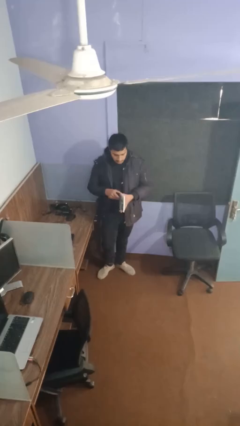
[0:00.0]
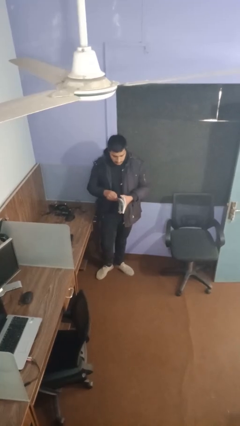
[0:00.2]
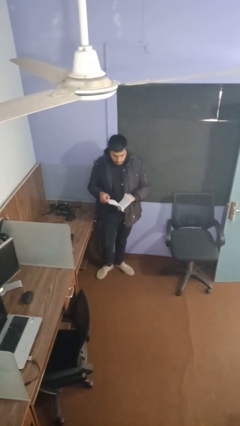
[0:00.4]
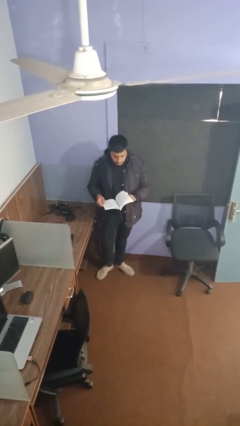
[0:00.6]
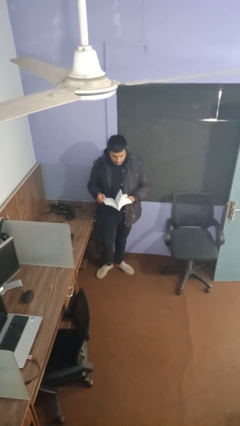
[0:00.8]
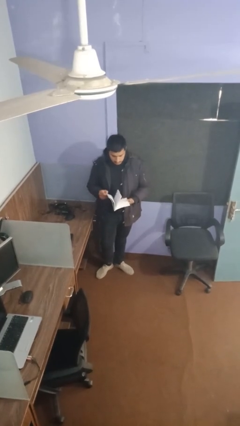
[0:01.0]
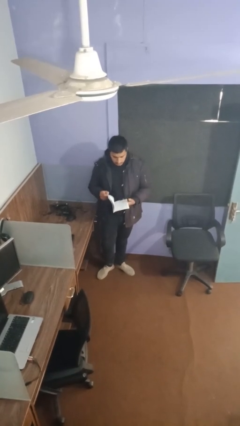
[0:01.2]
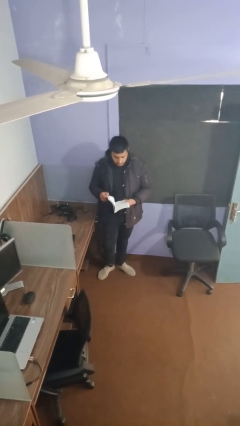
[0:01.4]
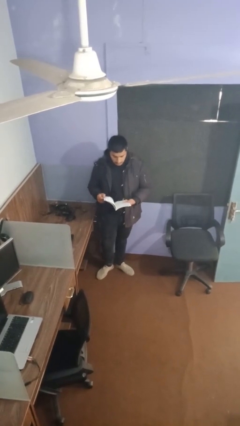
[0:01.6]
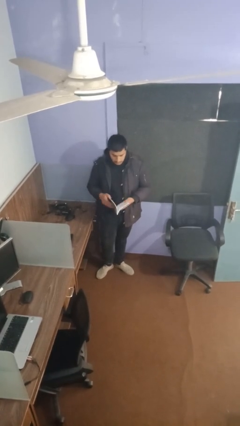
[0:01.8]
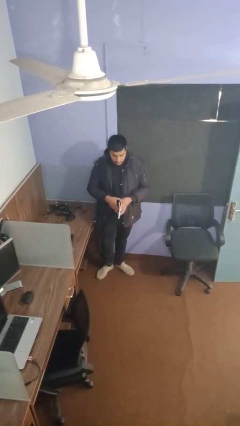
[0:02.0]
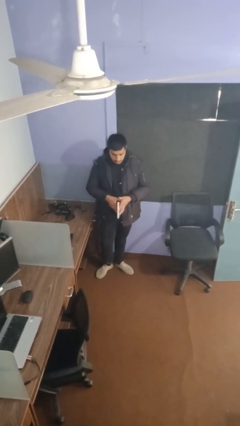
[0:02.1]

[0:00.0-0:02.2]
person reads document

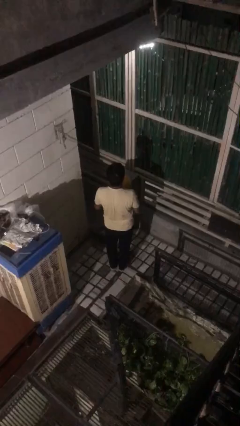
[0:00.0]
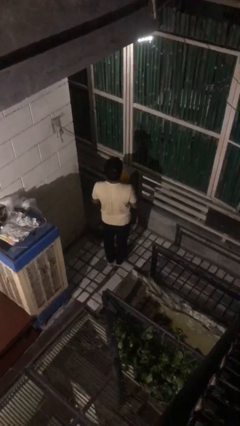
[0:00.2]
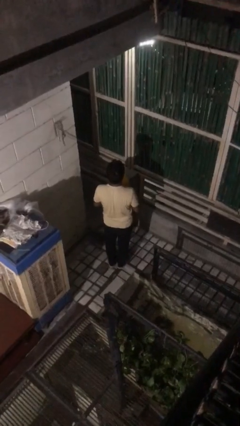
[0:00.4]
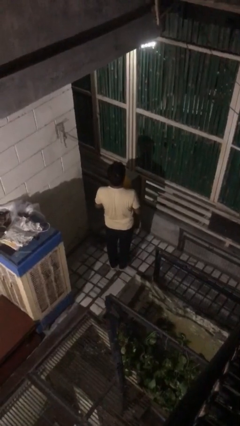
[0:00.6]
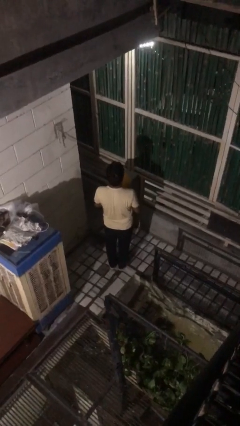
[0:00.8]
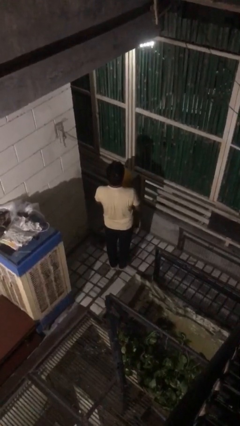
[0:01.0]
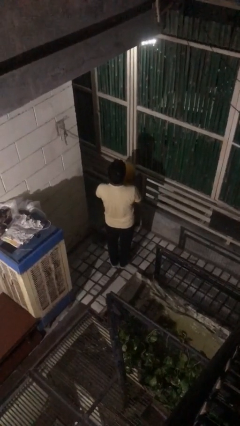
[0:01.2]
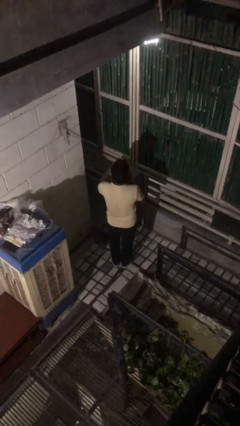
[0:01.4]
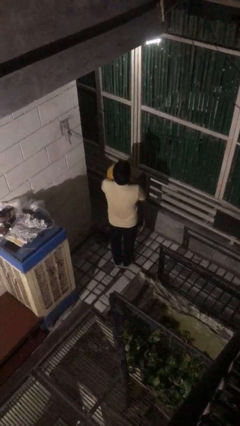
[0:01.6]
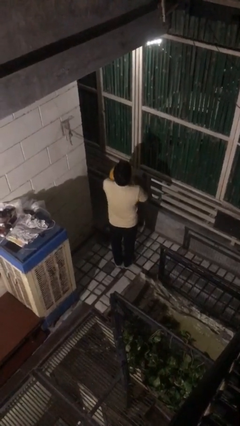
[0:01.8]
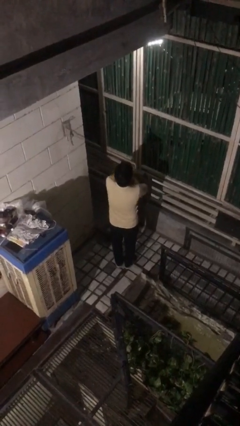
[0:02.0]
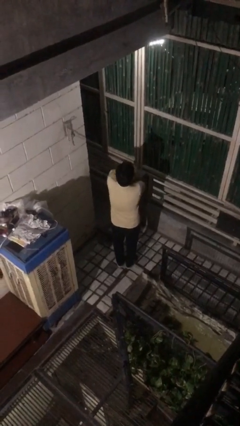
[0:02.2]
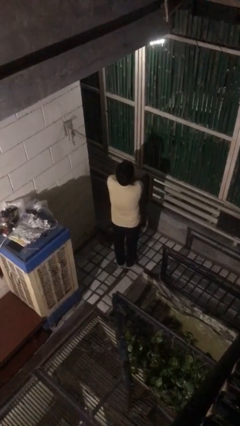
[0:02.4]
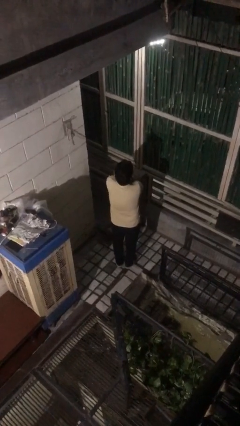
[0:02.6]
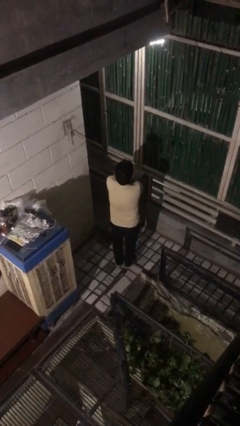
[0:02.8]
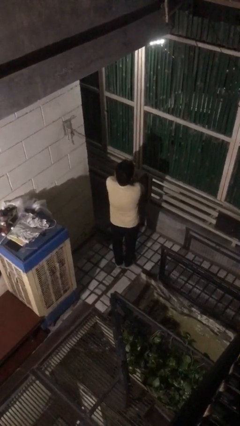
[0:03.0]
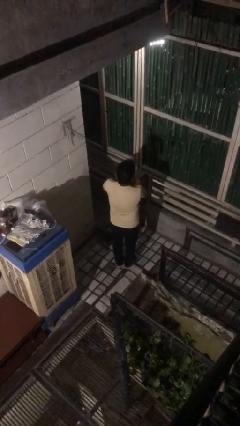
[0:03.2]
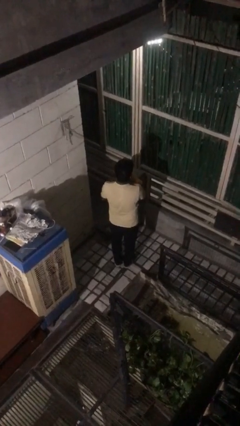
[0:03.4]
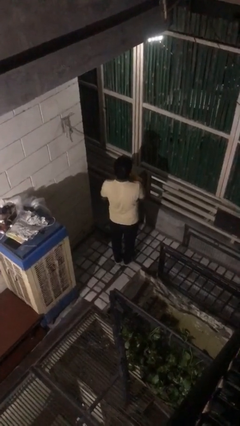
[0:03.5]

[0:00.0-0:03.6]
person hugs stuffed animal

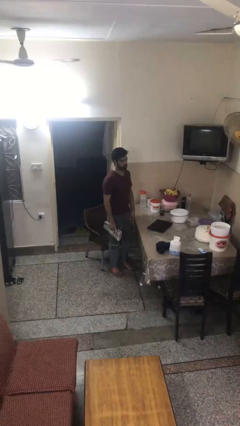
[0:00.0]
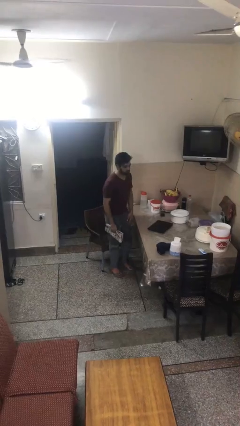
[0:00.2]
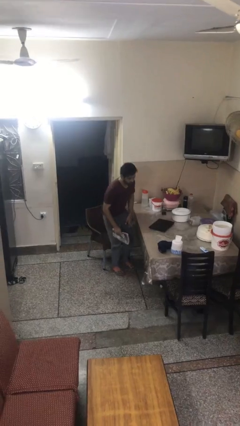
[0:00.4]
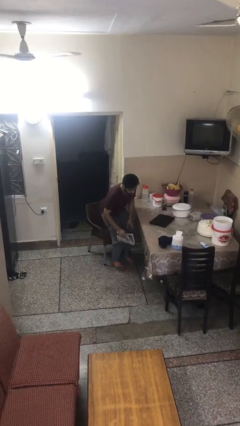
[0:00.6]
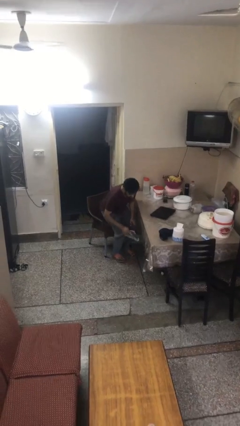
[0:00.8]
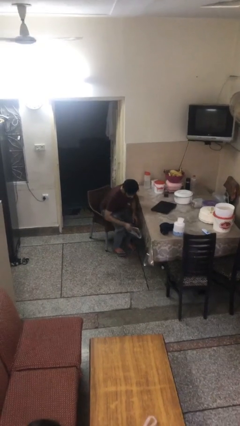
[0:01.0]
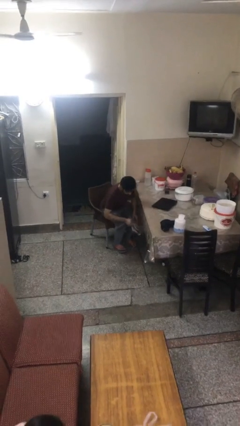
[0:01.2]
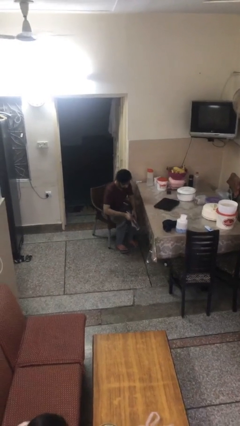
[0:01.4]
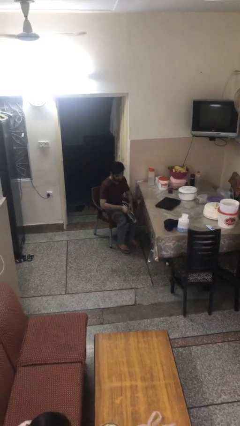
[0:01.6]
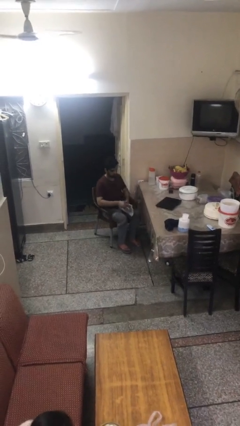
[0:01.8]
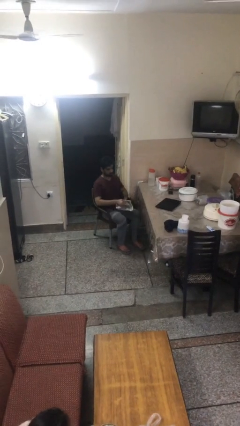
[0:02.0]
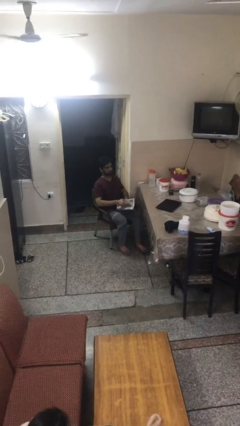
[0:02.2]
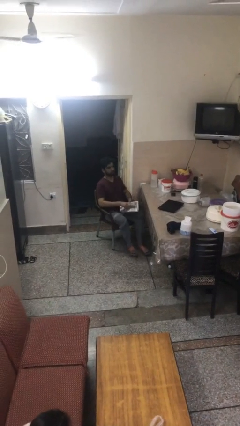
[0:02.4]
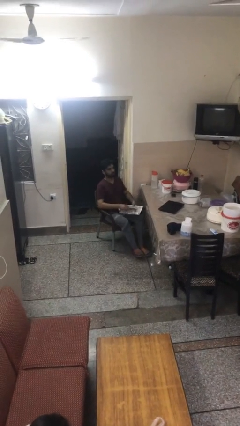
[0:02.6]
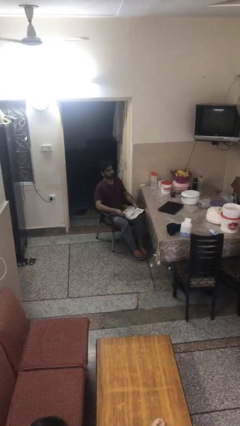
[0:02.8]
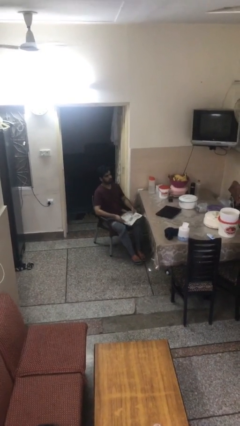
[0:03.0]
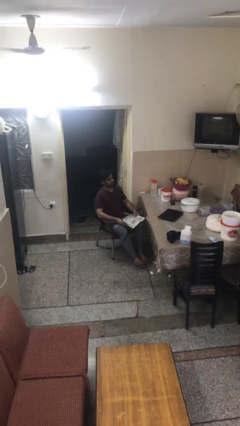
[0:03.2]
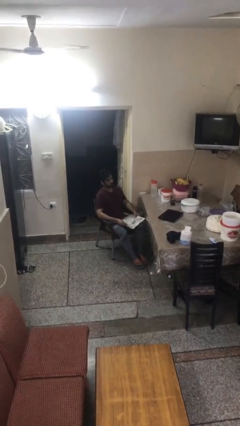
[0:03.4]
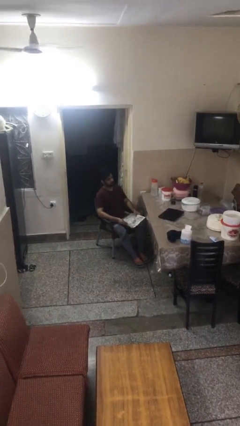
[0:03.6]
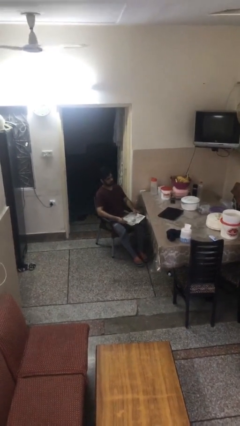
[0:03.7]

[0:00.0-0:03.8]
person sits down

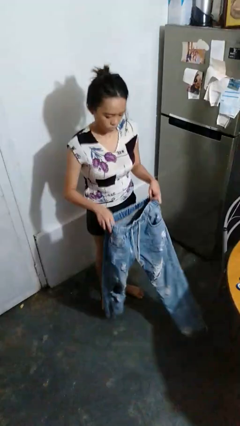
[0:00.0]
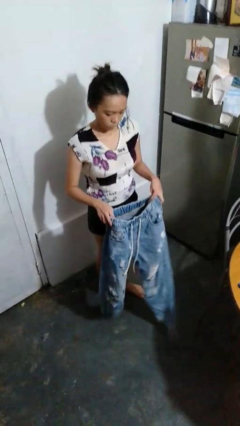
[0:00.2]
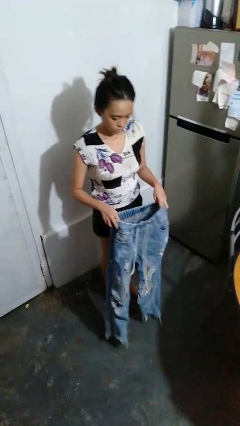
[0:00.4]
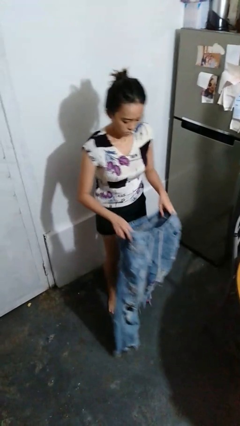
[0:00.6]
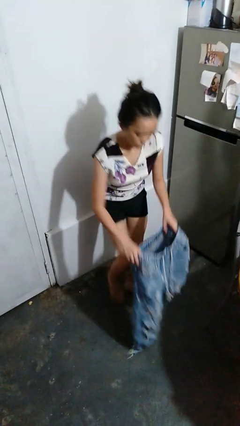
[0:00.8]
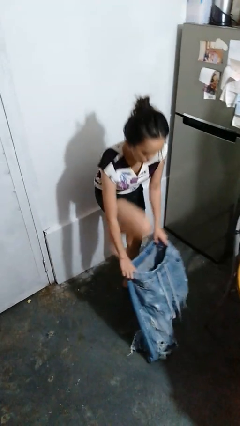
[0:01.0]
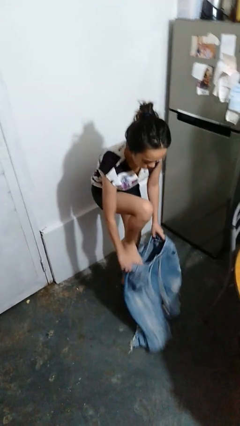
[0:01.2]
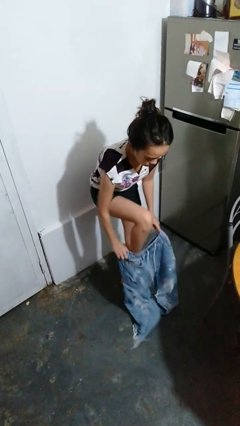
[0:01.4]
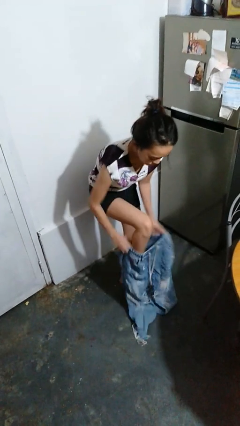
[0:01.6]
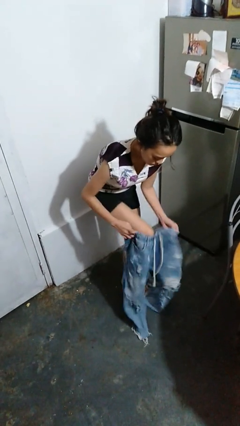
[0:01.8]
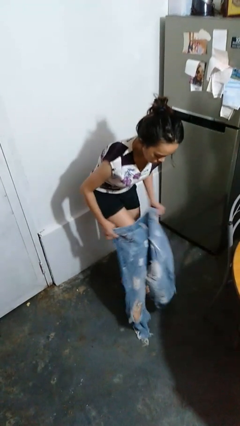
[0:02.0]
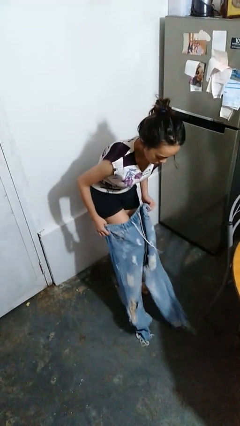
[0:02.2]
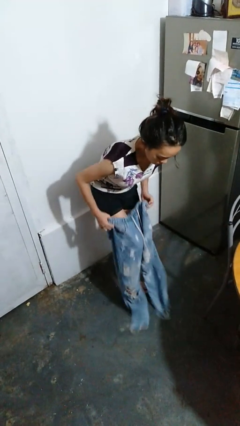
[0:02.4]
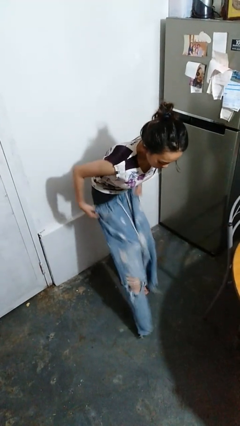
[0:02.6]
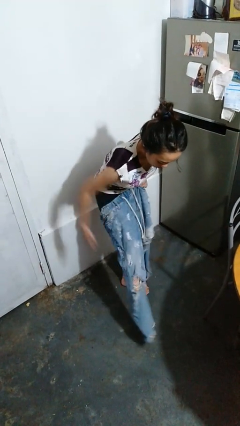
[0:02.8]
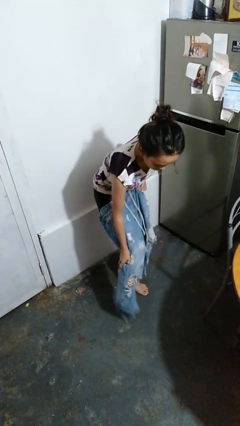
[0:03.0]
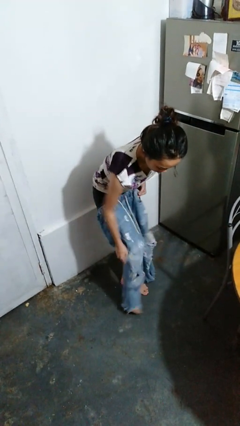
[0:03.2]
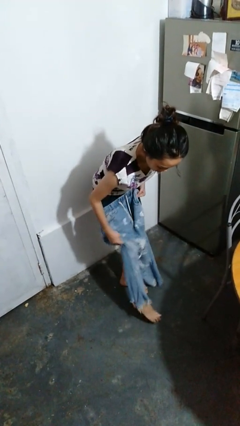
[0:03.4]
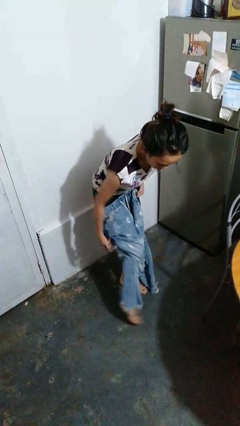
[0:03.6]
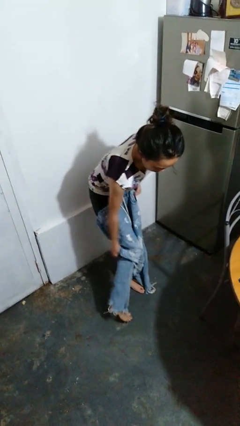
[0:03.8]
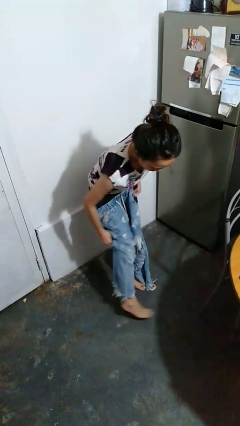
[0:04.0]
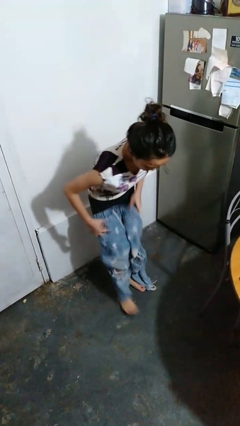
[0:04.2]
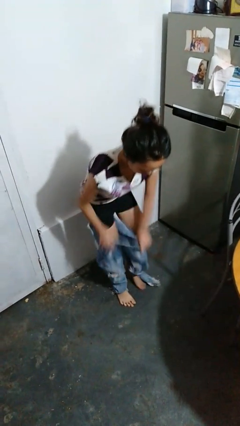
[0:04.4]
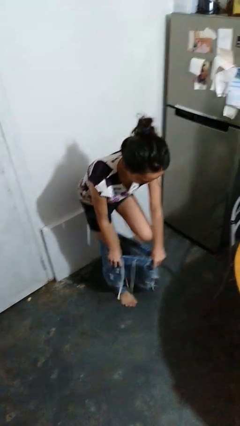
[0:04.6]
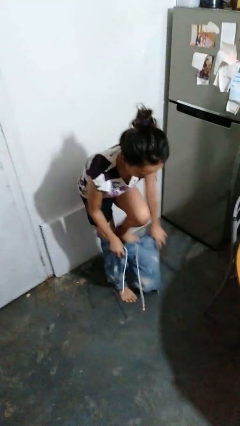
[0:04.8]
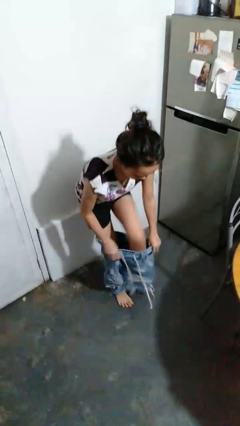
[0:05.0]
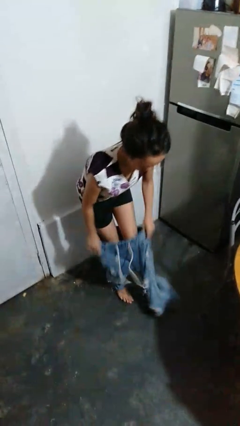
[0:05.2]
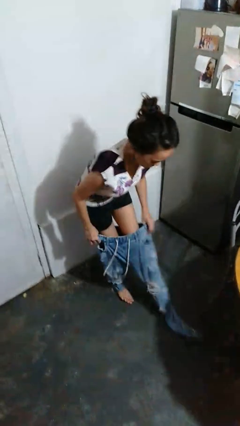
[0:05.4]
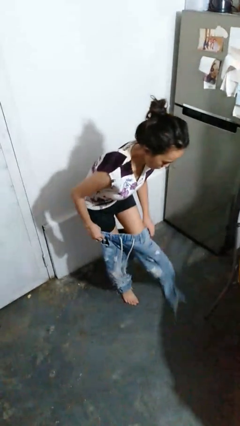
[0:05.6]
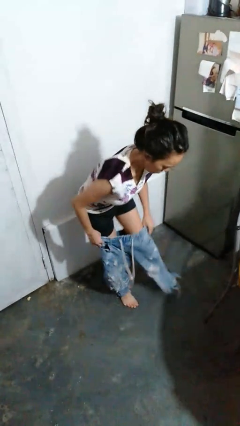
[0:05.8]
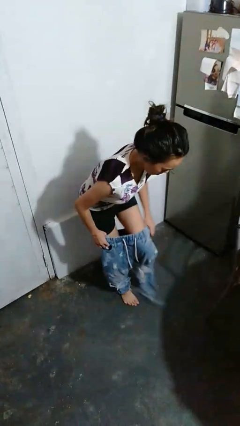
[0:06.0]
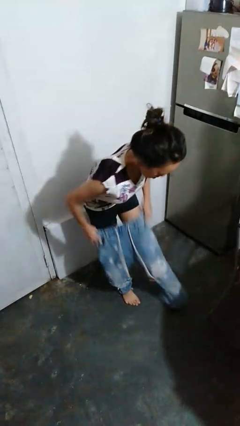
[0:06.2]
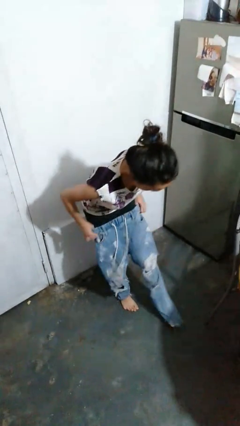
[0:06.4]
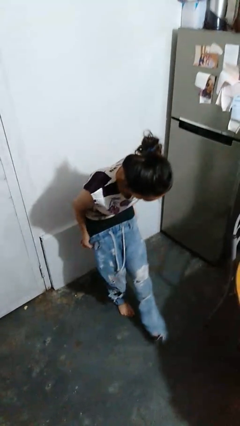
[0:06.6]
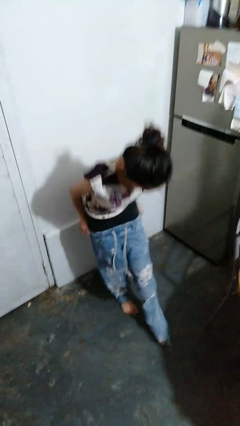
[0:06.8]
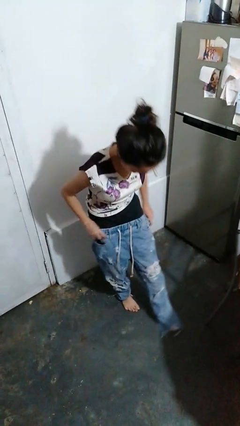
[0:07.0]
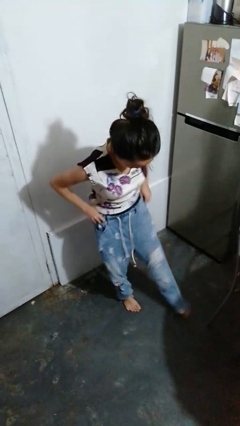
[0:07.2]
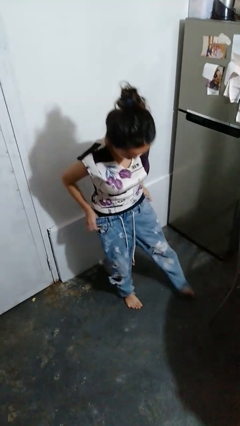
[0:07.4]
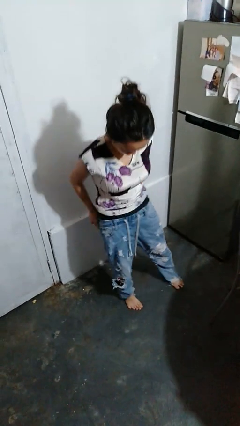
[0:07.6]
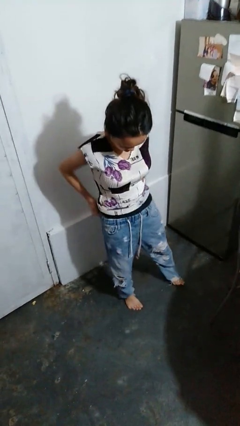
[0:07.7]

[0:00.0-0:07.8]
person puts on pants

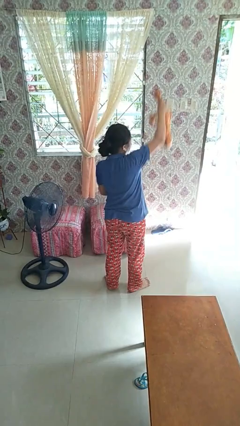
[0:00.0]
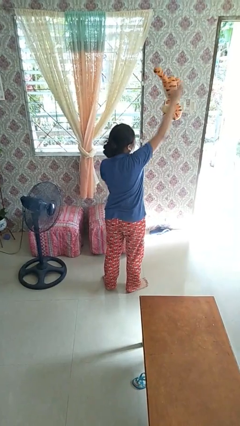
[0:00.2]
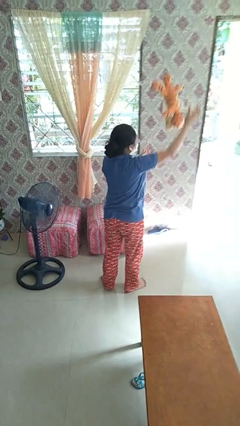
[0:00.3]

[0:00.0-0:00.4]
person drops object
